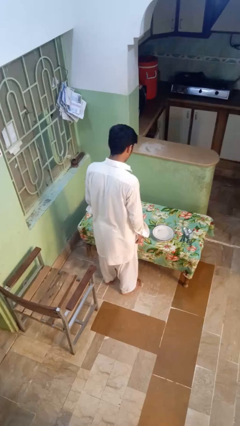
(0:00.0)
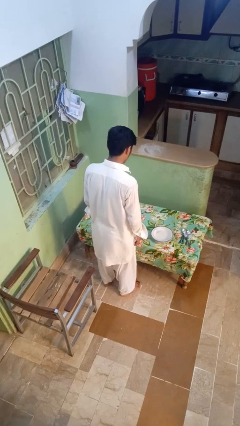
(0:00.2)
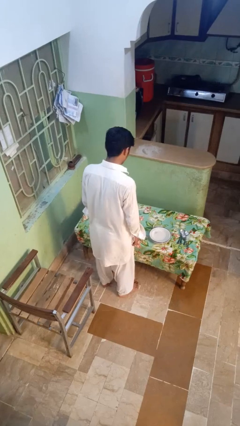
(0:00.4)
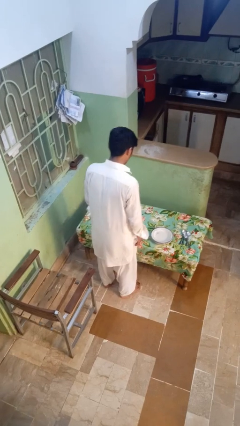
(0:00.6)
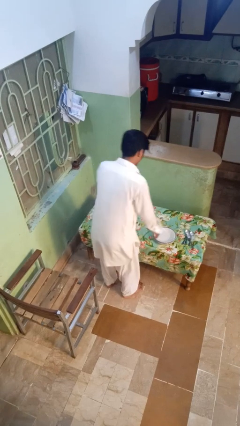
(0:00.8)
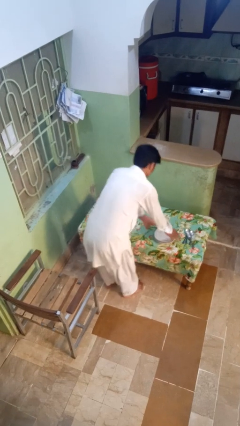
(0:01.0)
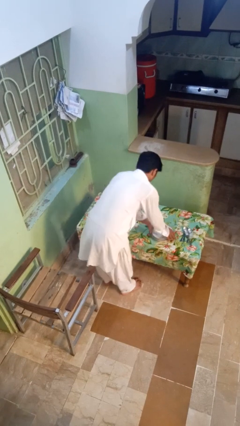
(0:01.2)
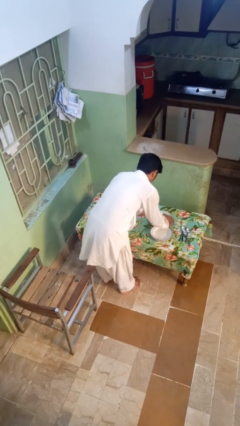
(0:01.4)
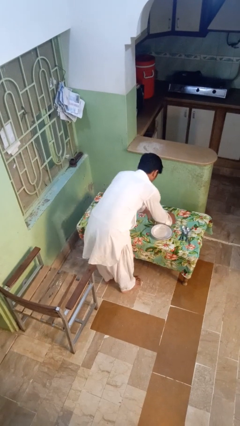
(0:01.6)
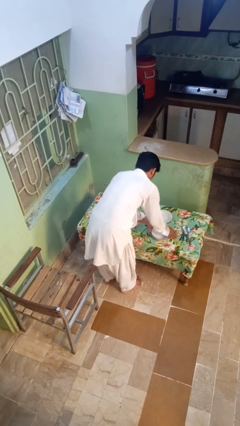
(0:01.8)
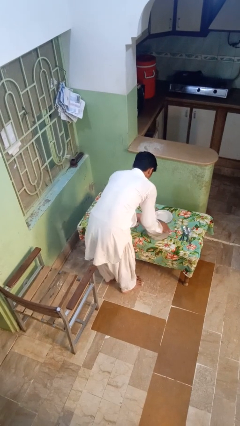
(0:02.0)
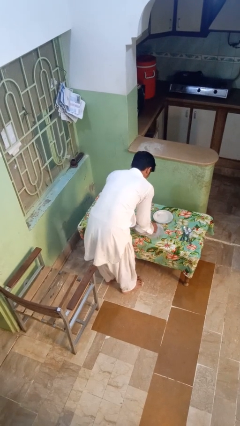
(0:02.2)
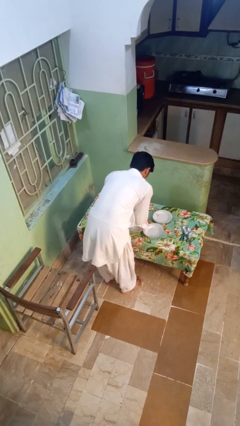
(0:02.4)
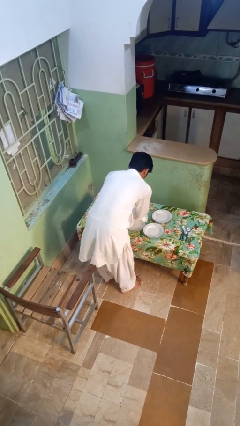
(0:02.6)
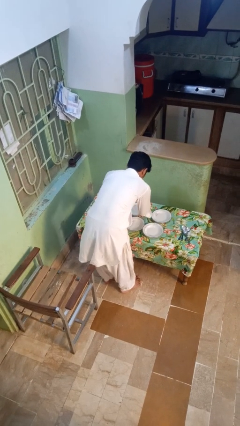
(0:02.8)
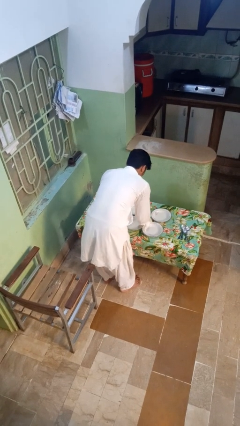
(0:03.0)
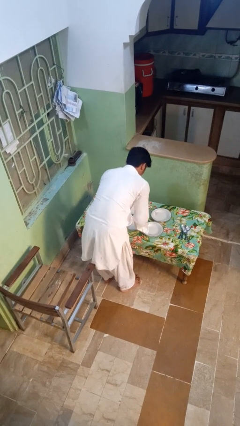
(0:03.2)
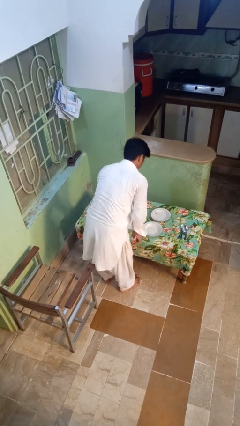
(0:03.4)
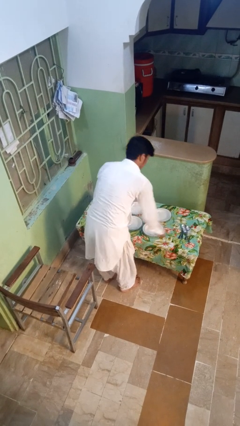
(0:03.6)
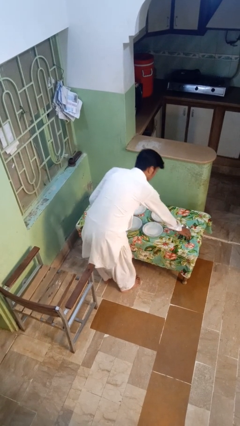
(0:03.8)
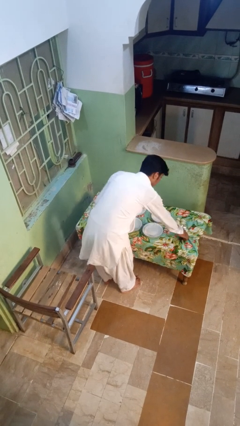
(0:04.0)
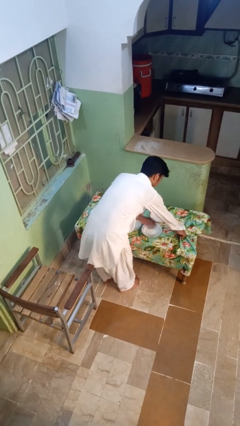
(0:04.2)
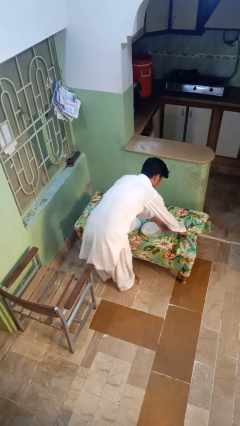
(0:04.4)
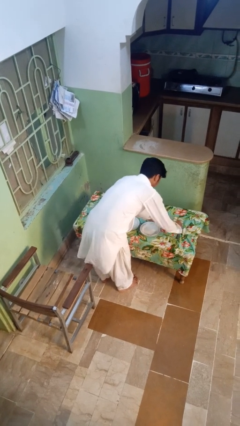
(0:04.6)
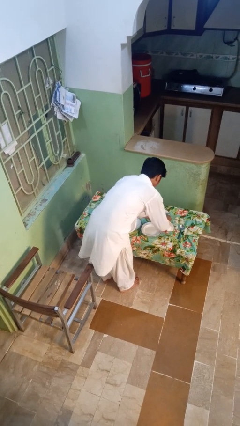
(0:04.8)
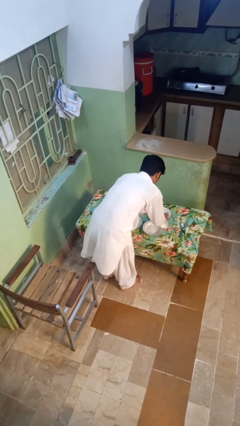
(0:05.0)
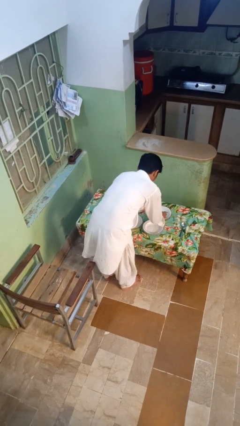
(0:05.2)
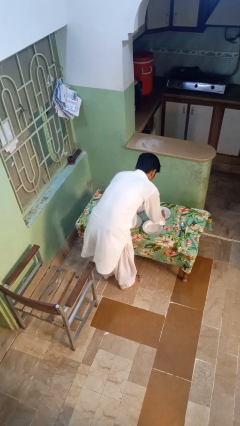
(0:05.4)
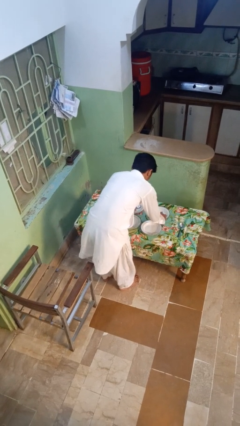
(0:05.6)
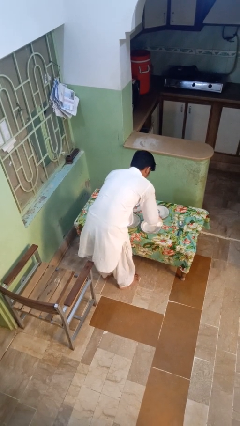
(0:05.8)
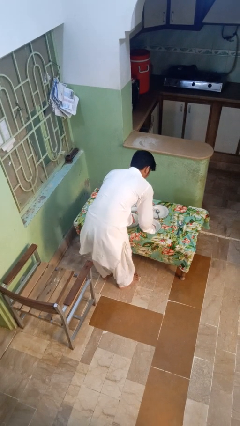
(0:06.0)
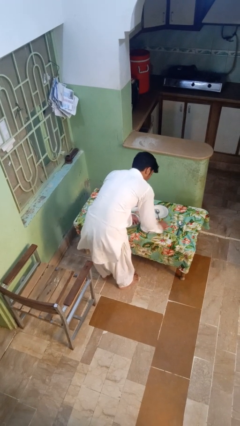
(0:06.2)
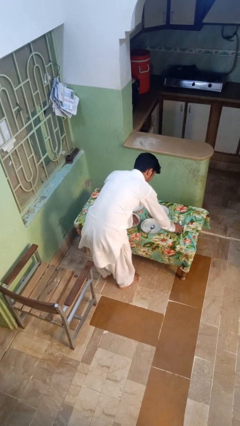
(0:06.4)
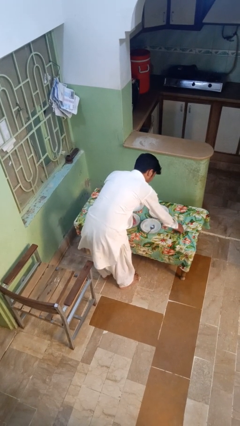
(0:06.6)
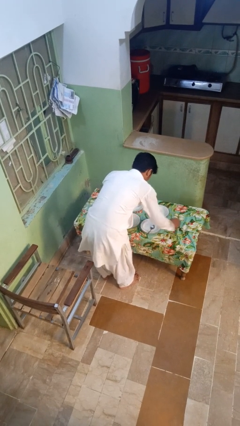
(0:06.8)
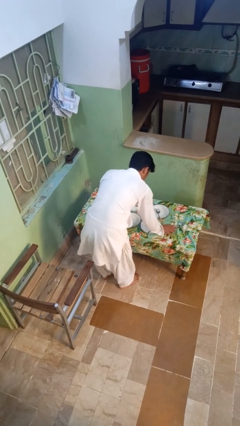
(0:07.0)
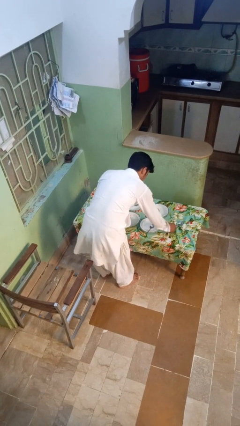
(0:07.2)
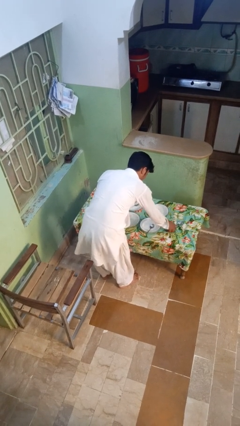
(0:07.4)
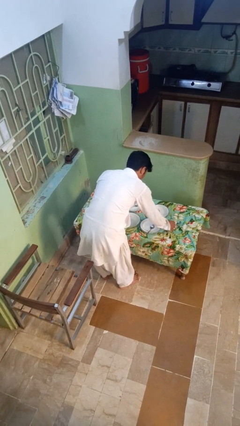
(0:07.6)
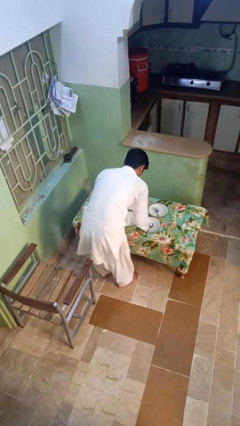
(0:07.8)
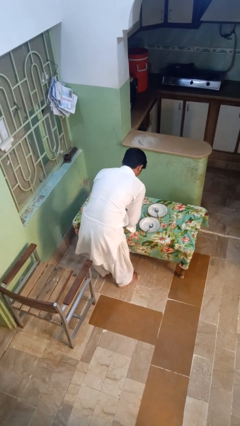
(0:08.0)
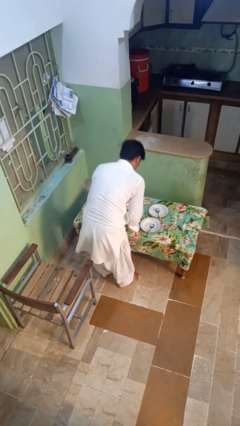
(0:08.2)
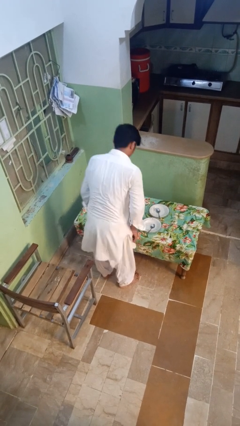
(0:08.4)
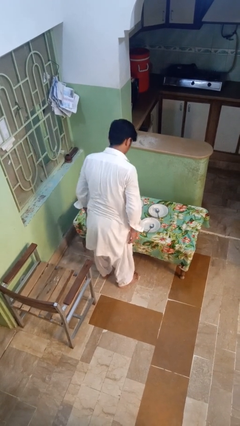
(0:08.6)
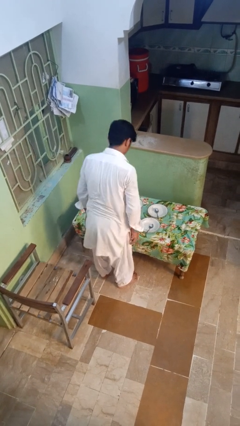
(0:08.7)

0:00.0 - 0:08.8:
person sets table

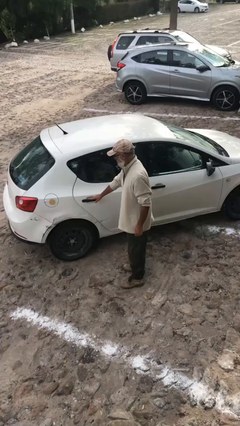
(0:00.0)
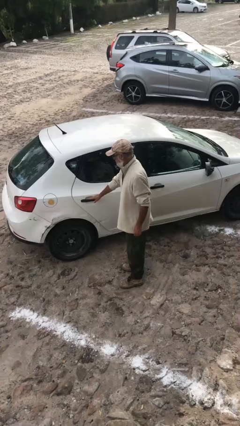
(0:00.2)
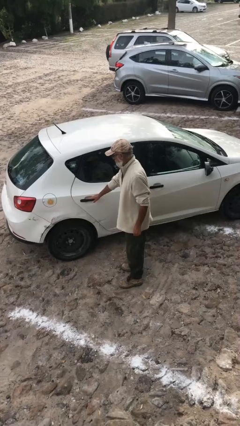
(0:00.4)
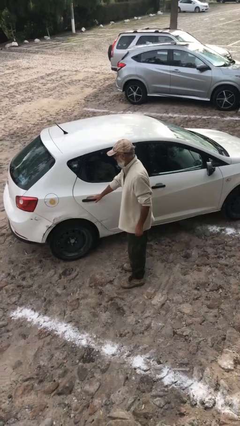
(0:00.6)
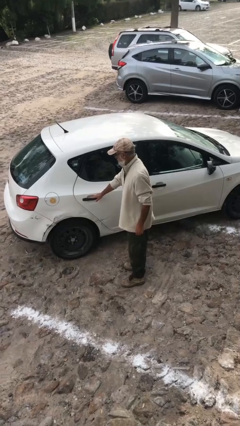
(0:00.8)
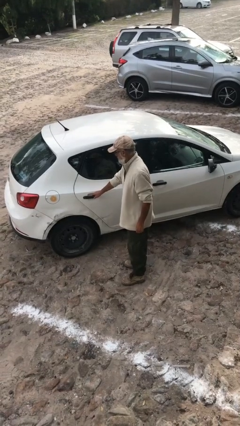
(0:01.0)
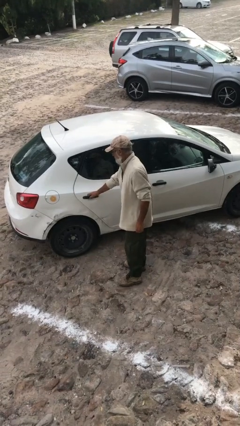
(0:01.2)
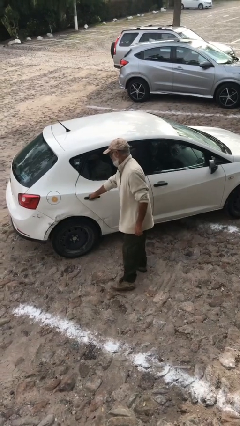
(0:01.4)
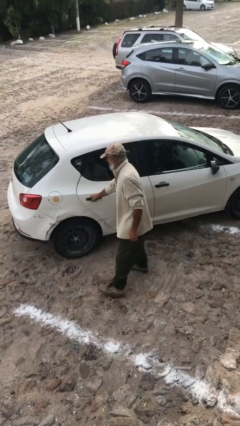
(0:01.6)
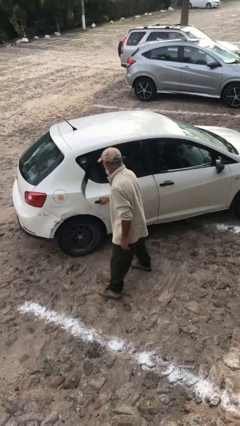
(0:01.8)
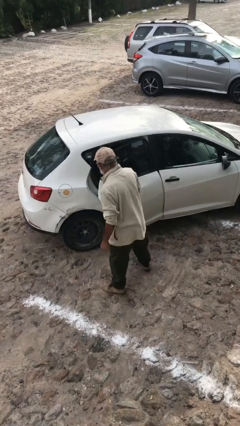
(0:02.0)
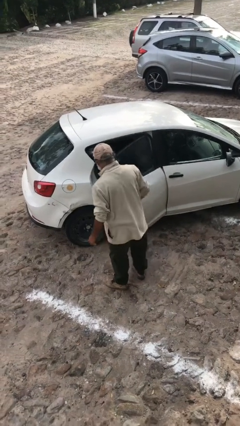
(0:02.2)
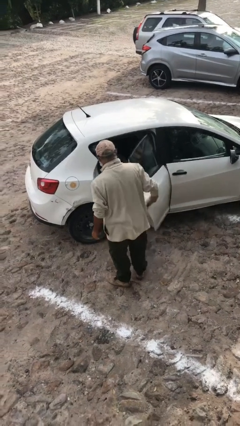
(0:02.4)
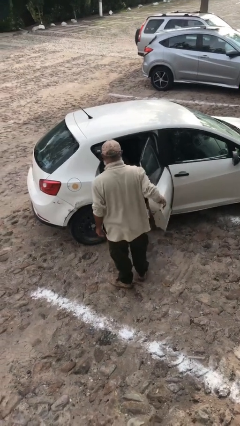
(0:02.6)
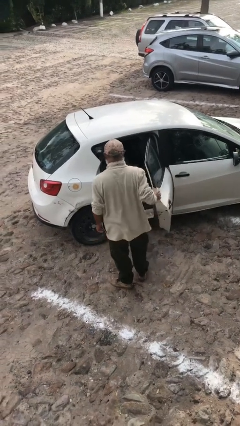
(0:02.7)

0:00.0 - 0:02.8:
person opens car door

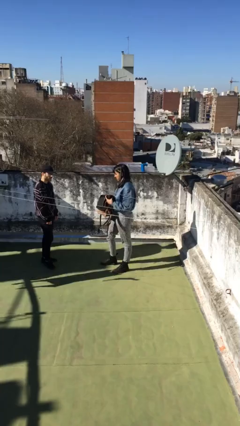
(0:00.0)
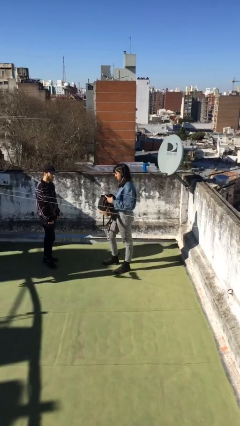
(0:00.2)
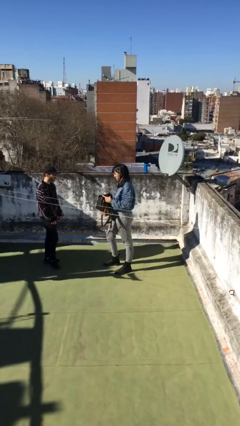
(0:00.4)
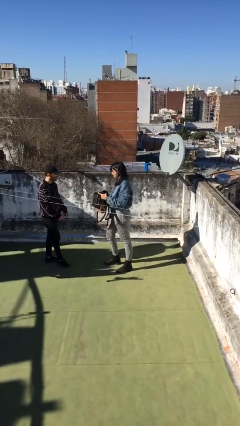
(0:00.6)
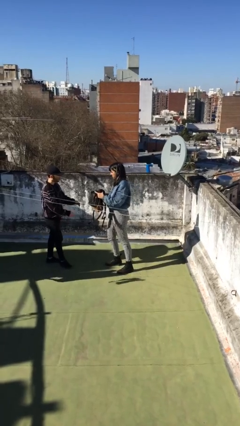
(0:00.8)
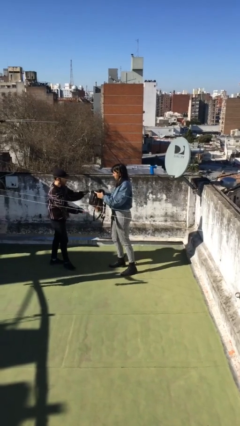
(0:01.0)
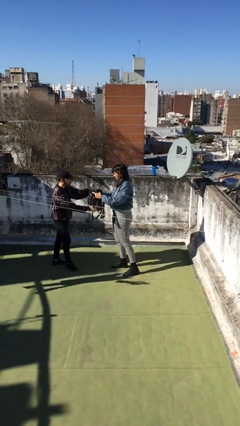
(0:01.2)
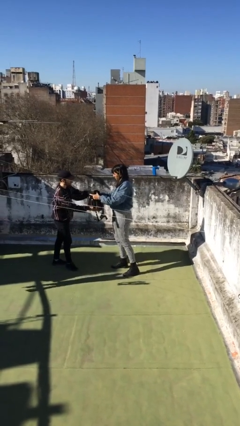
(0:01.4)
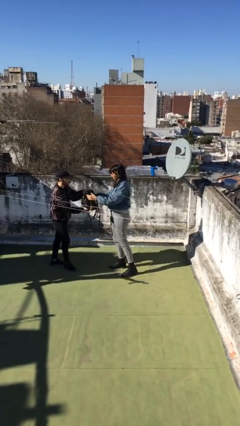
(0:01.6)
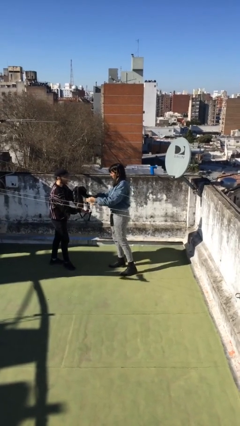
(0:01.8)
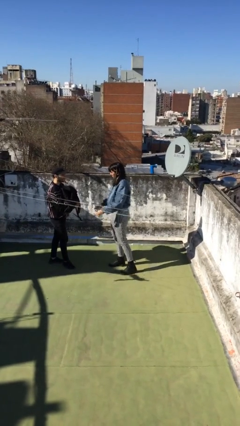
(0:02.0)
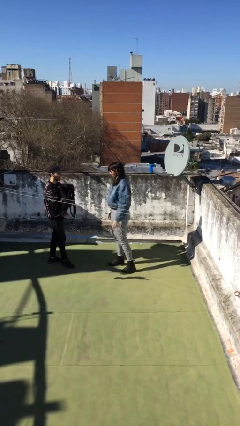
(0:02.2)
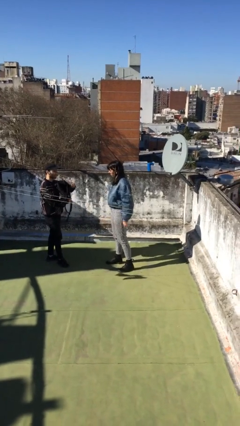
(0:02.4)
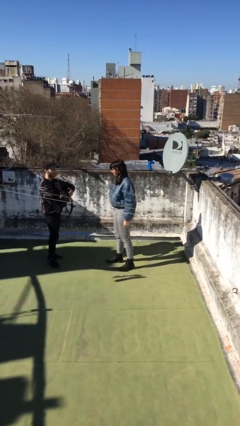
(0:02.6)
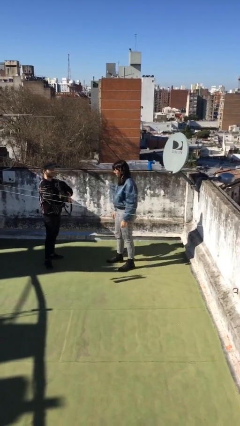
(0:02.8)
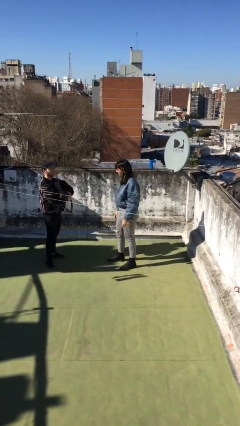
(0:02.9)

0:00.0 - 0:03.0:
person transfers object to person

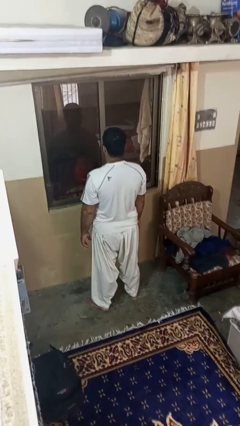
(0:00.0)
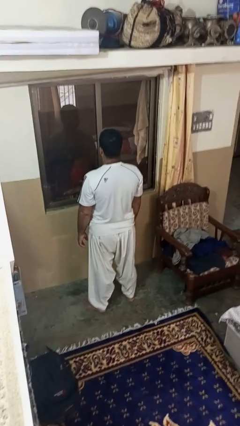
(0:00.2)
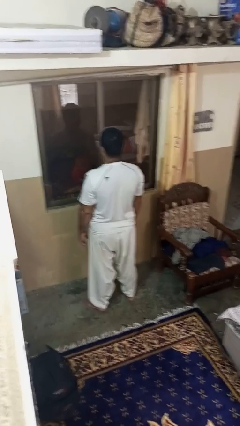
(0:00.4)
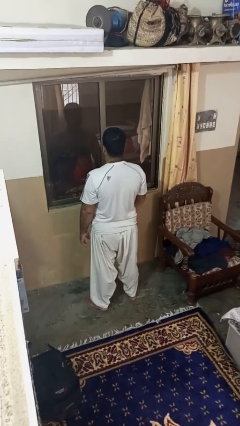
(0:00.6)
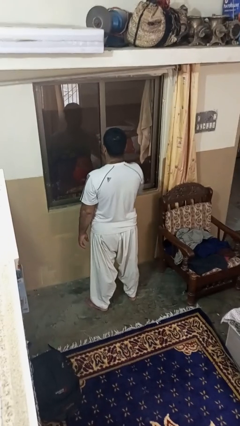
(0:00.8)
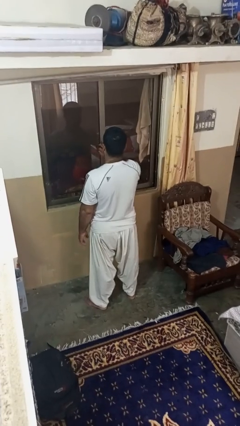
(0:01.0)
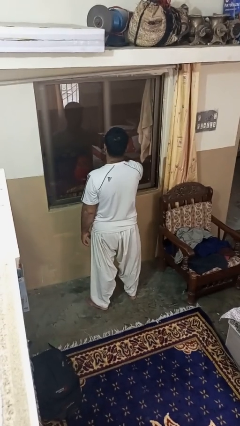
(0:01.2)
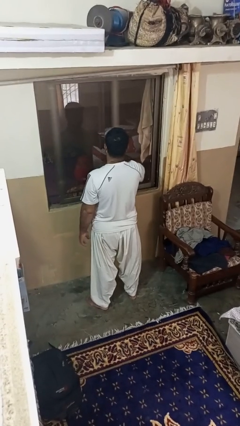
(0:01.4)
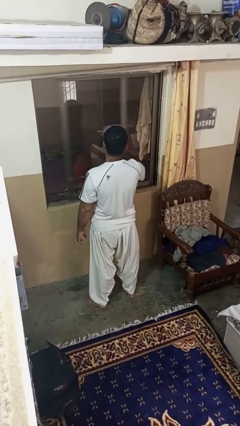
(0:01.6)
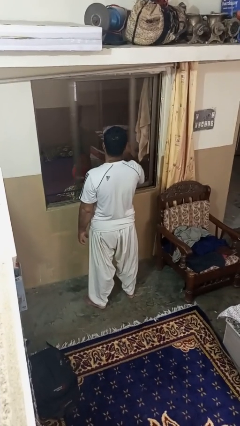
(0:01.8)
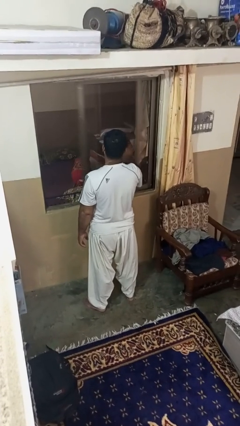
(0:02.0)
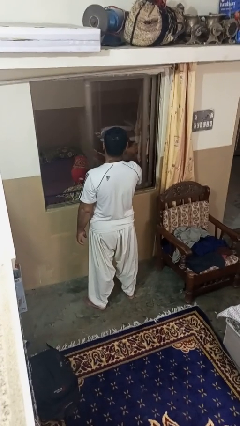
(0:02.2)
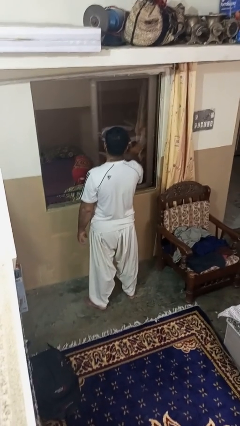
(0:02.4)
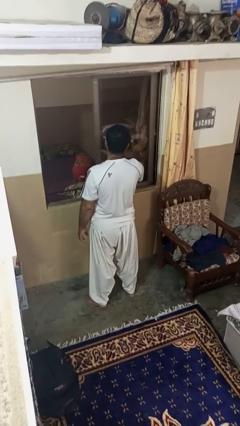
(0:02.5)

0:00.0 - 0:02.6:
person opens home window

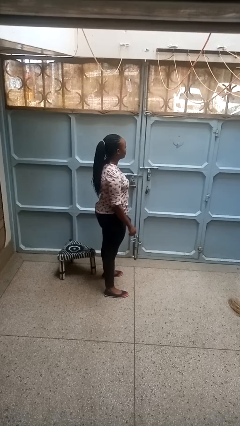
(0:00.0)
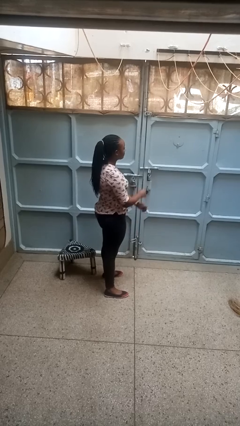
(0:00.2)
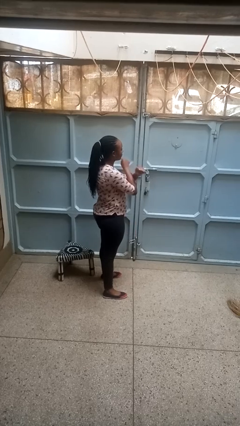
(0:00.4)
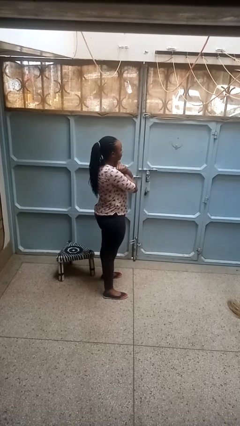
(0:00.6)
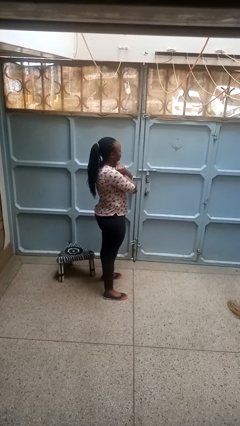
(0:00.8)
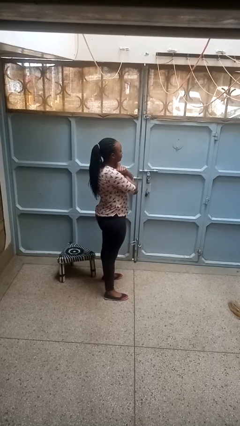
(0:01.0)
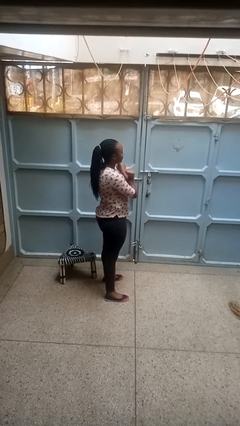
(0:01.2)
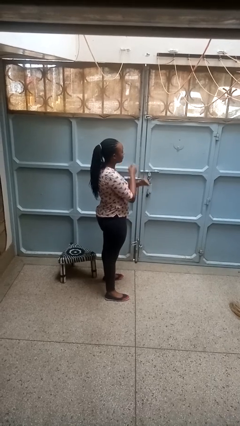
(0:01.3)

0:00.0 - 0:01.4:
person gestures arms x
